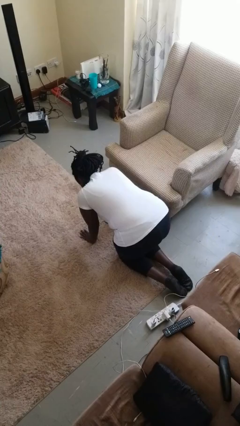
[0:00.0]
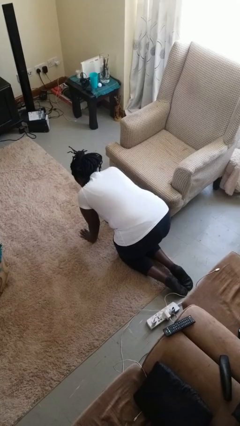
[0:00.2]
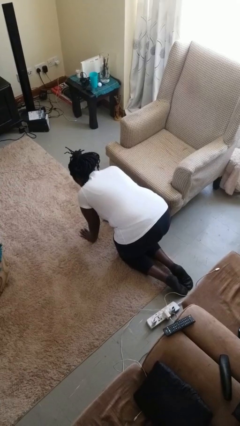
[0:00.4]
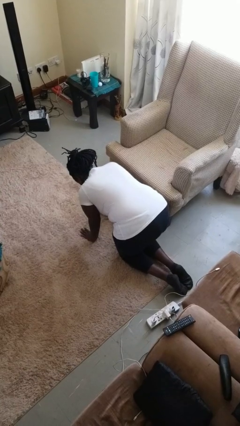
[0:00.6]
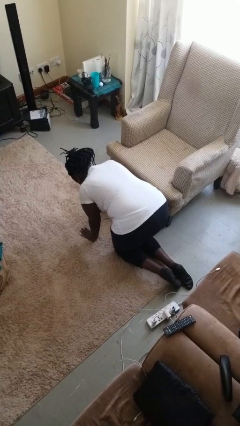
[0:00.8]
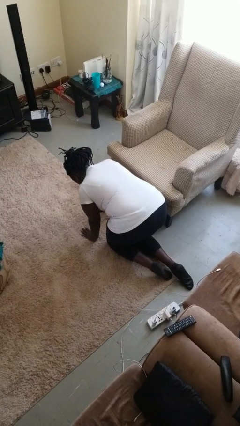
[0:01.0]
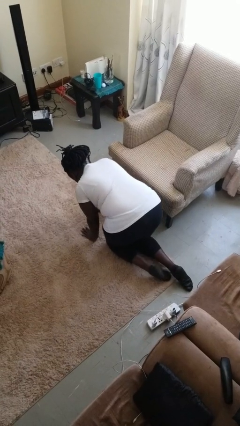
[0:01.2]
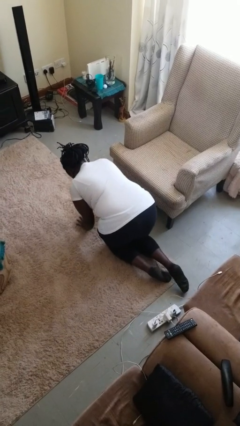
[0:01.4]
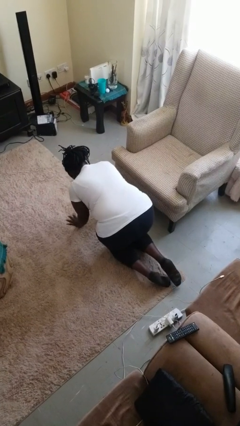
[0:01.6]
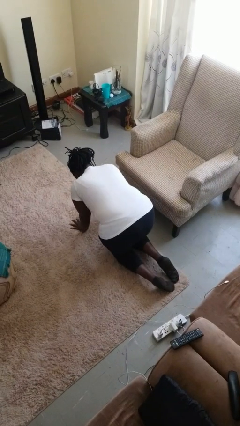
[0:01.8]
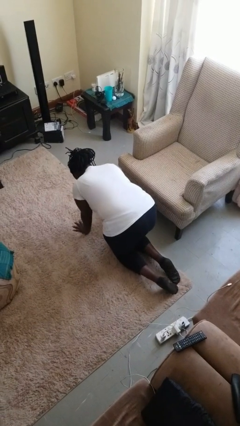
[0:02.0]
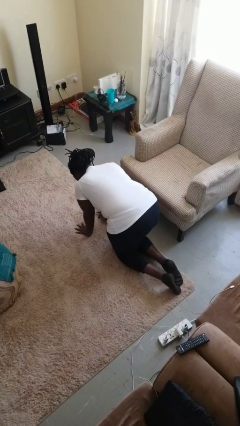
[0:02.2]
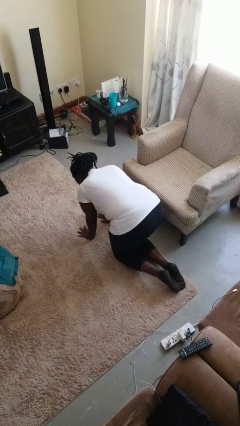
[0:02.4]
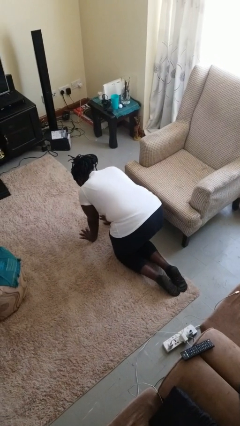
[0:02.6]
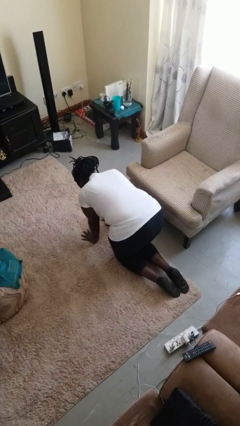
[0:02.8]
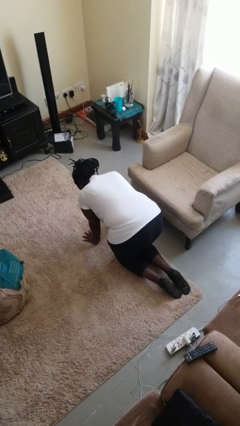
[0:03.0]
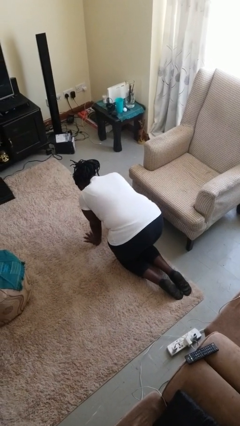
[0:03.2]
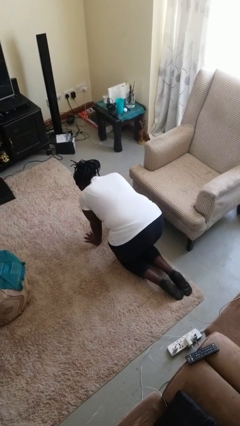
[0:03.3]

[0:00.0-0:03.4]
person crawls

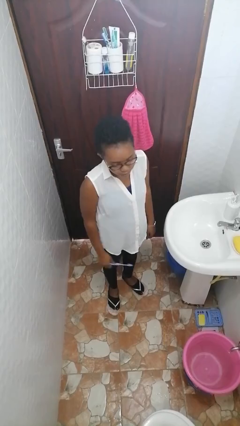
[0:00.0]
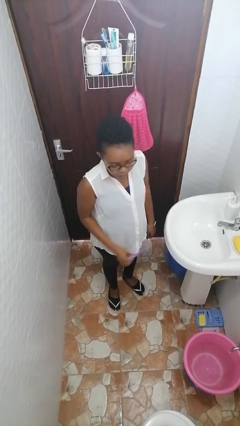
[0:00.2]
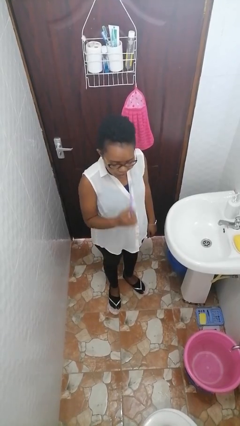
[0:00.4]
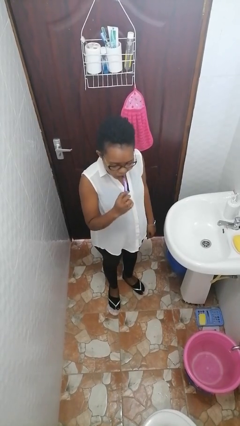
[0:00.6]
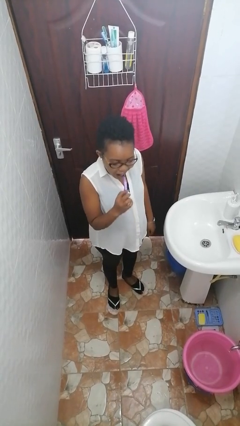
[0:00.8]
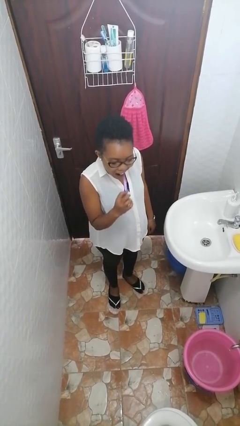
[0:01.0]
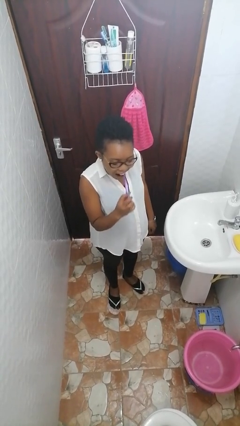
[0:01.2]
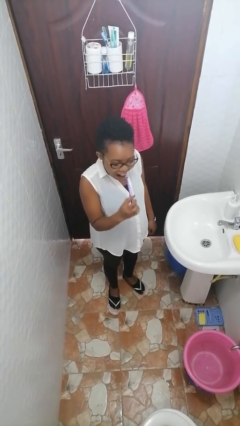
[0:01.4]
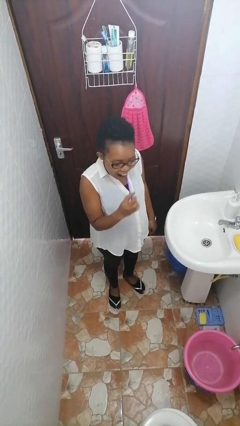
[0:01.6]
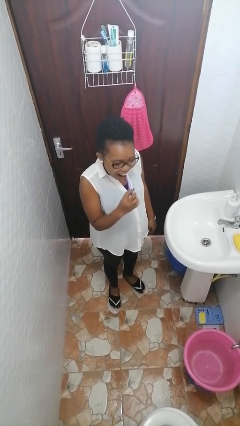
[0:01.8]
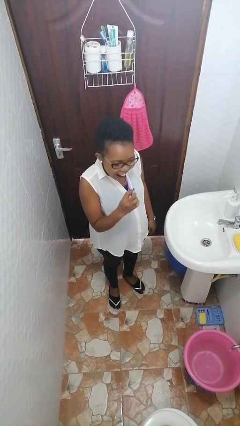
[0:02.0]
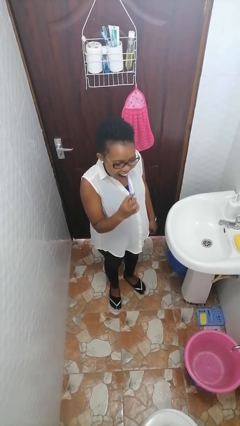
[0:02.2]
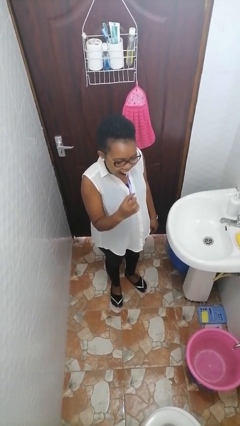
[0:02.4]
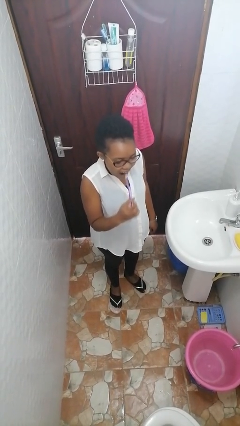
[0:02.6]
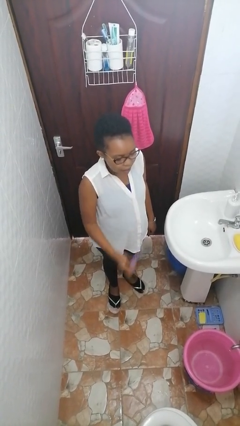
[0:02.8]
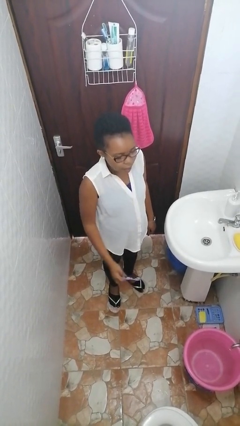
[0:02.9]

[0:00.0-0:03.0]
person brushes teeth

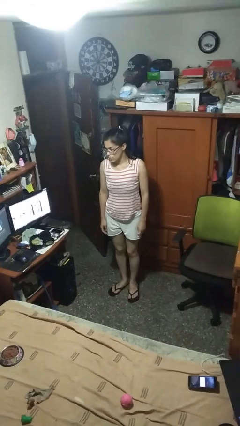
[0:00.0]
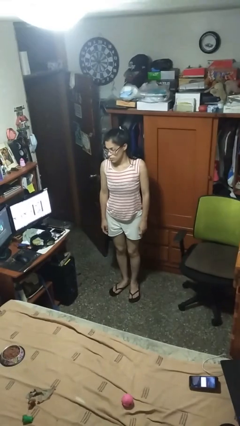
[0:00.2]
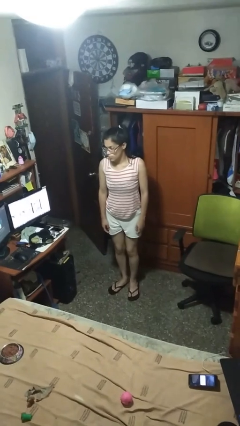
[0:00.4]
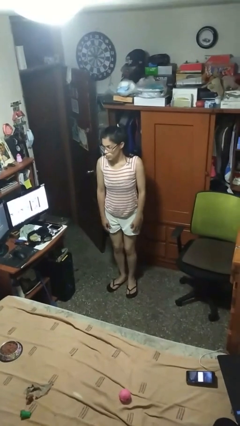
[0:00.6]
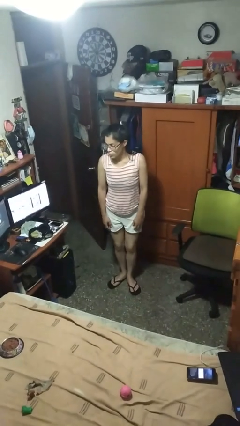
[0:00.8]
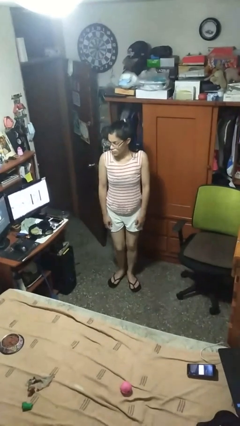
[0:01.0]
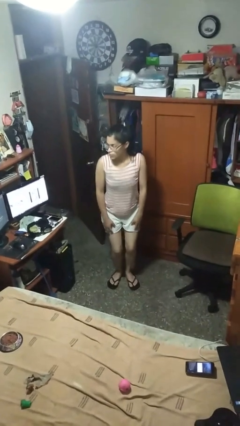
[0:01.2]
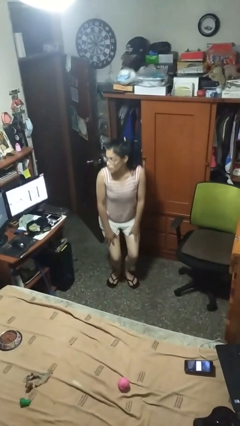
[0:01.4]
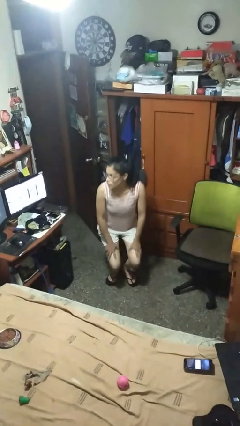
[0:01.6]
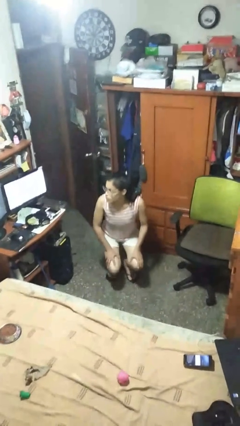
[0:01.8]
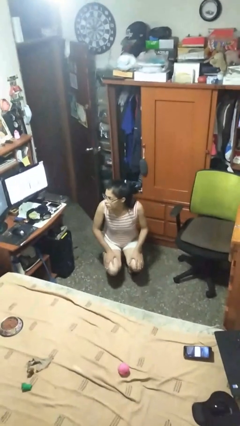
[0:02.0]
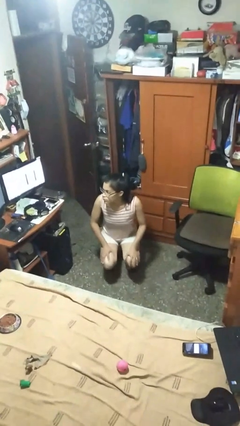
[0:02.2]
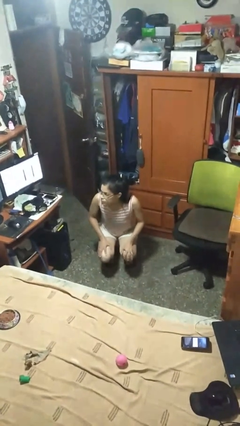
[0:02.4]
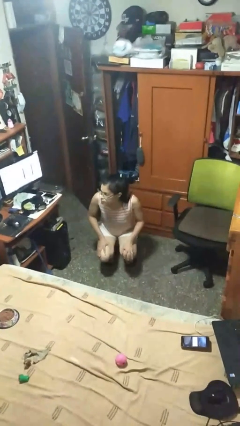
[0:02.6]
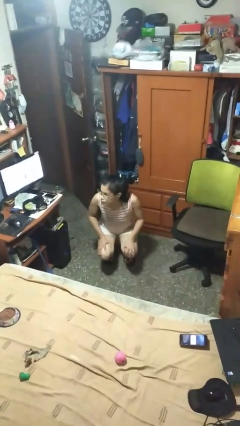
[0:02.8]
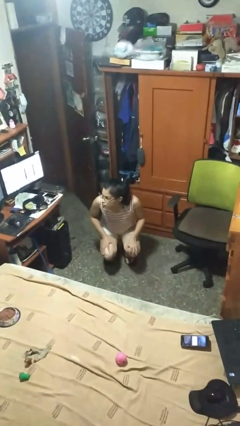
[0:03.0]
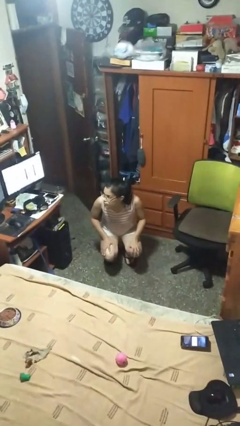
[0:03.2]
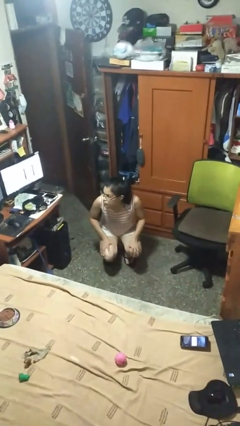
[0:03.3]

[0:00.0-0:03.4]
person squats

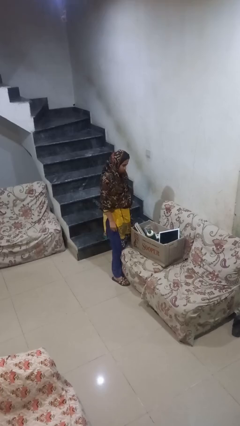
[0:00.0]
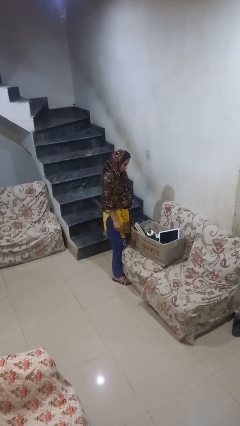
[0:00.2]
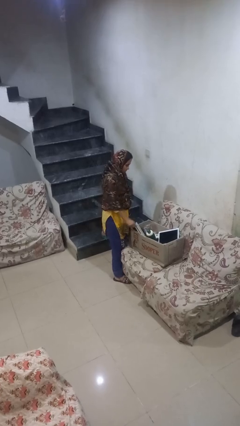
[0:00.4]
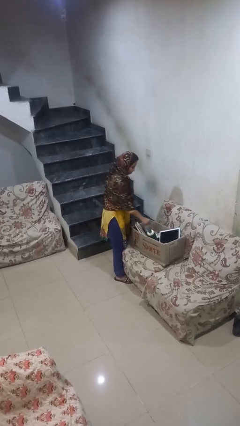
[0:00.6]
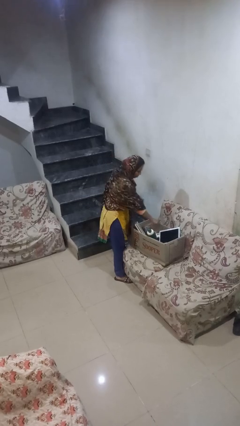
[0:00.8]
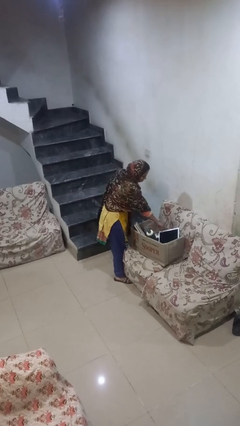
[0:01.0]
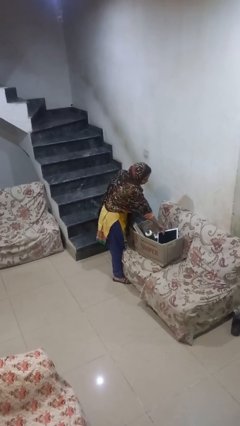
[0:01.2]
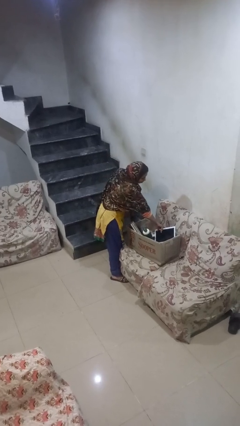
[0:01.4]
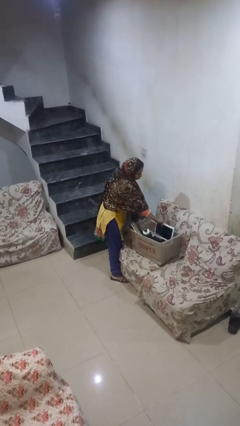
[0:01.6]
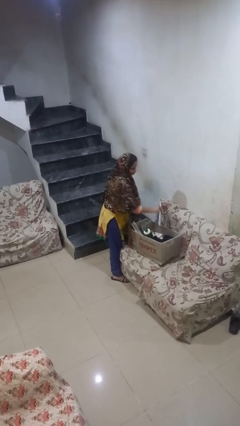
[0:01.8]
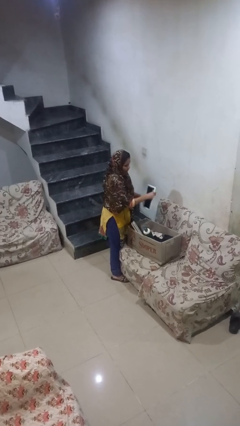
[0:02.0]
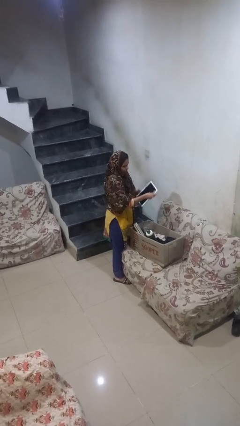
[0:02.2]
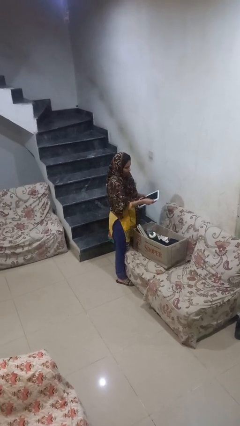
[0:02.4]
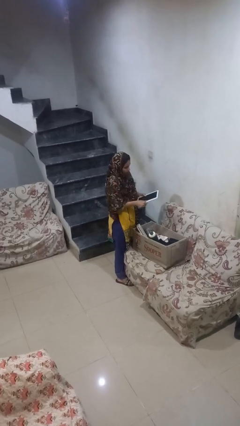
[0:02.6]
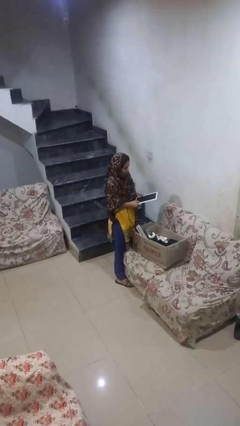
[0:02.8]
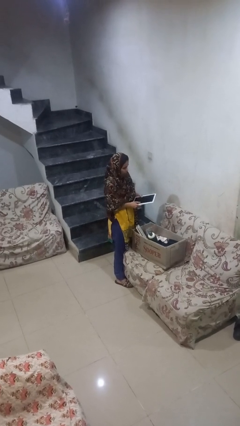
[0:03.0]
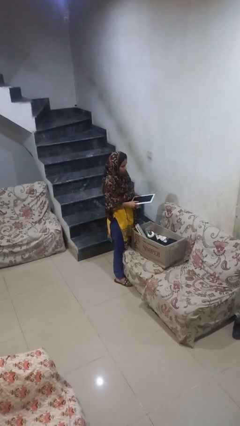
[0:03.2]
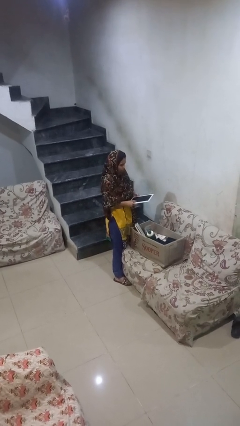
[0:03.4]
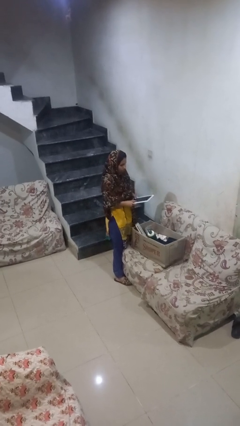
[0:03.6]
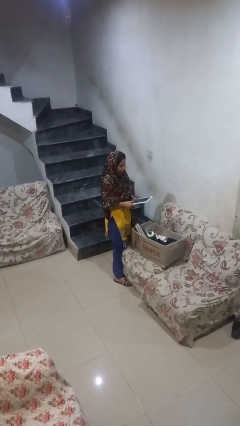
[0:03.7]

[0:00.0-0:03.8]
person takes object from box

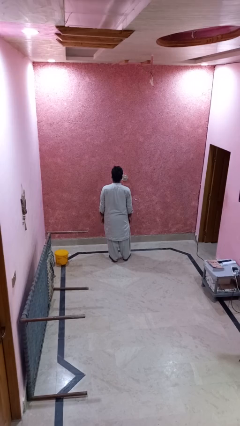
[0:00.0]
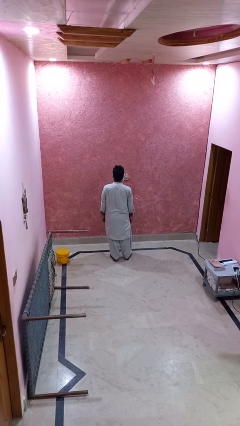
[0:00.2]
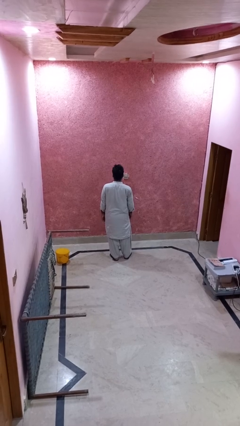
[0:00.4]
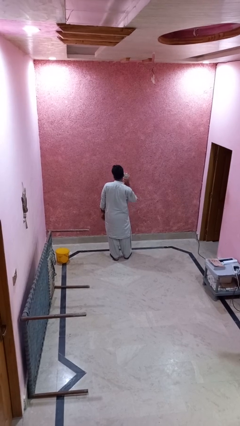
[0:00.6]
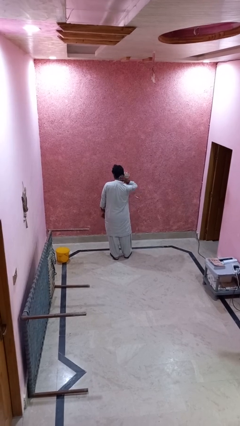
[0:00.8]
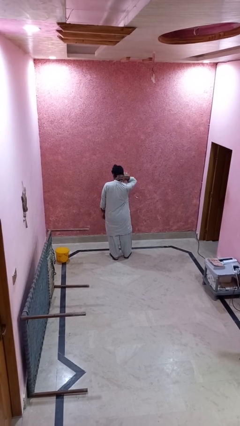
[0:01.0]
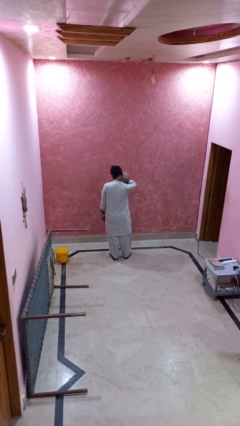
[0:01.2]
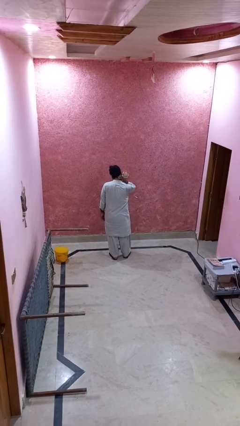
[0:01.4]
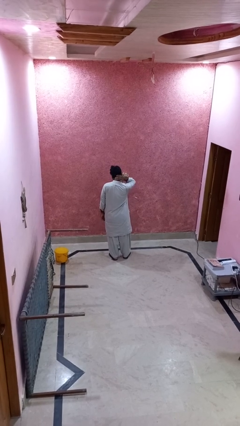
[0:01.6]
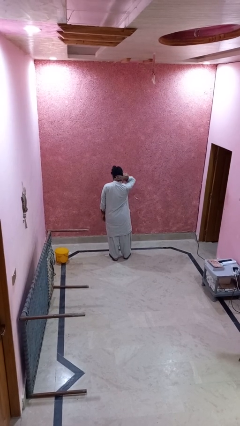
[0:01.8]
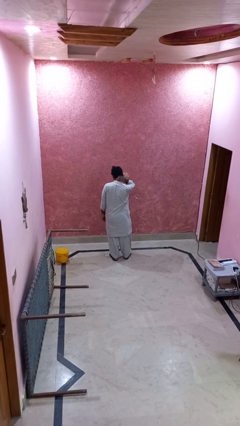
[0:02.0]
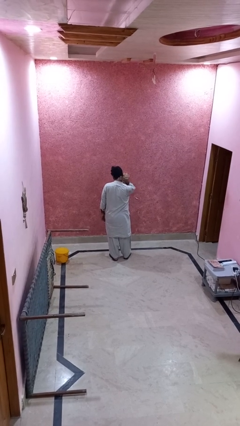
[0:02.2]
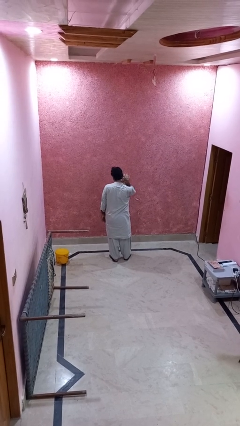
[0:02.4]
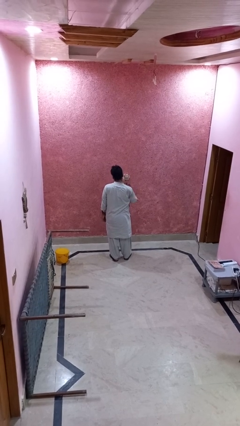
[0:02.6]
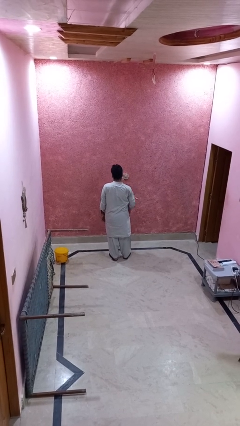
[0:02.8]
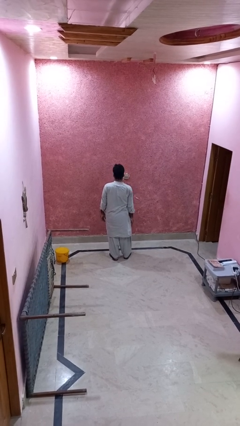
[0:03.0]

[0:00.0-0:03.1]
person rubs neck

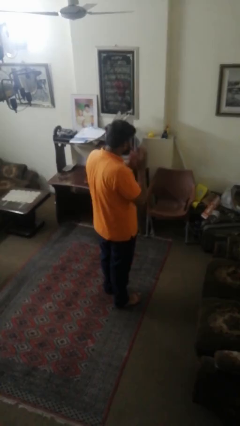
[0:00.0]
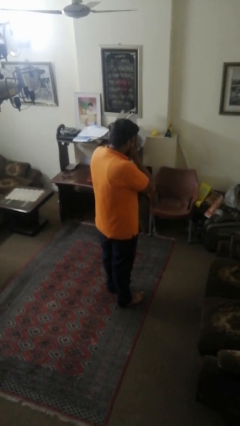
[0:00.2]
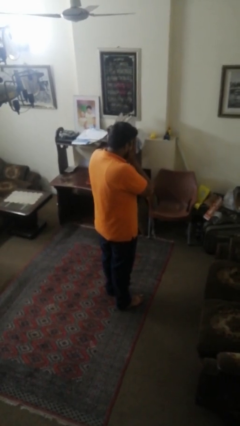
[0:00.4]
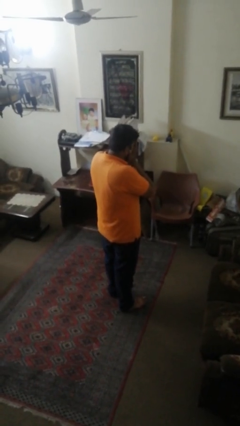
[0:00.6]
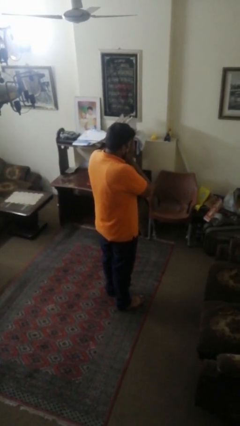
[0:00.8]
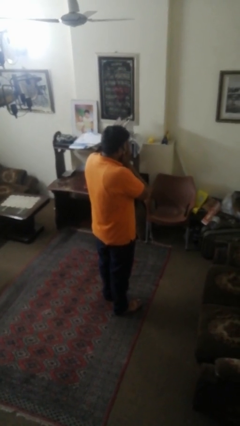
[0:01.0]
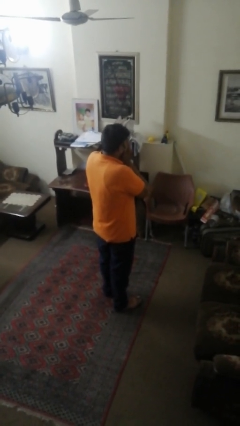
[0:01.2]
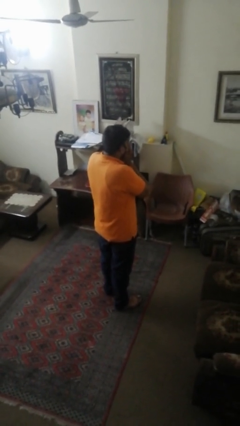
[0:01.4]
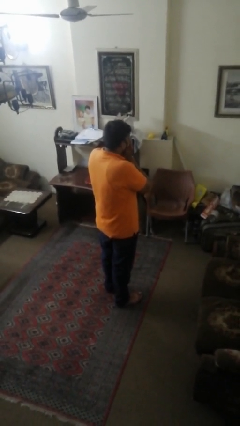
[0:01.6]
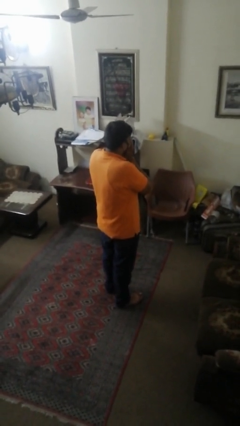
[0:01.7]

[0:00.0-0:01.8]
person covers face with hands
